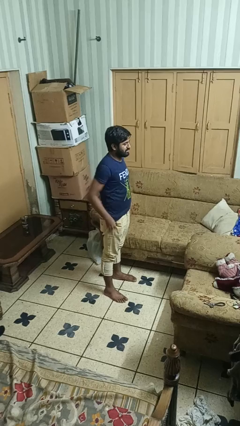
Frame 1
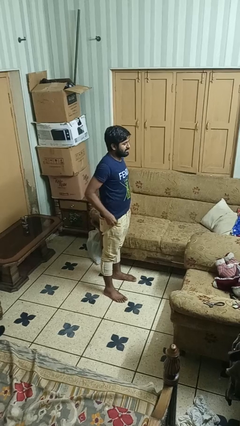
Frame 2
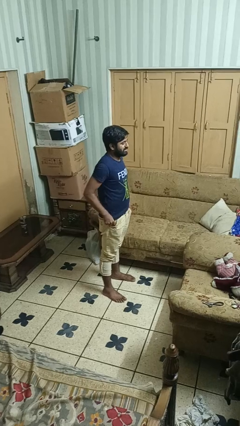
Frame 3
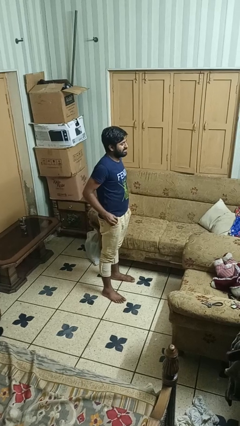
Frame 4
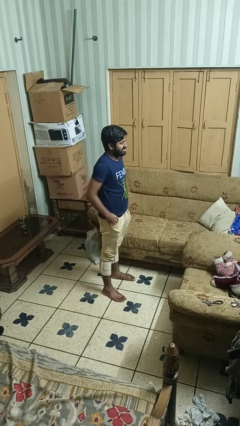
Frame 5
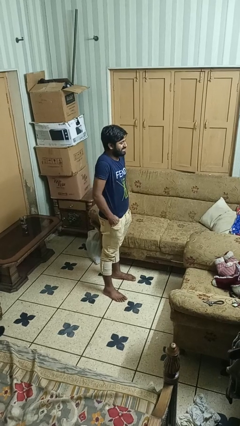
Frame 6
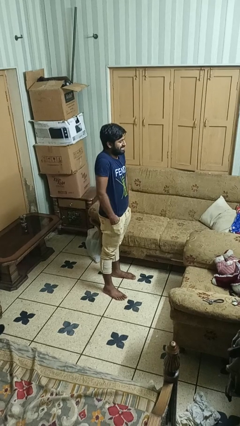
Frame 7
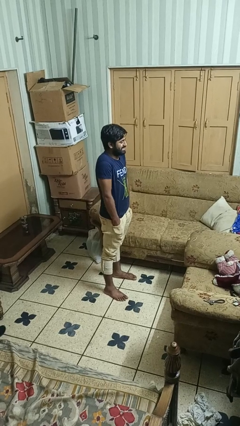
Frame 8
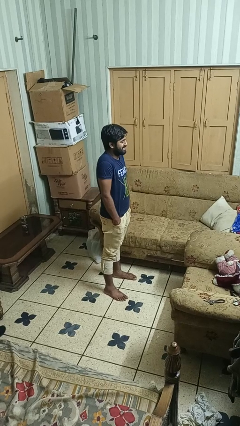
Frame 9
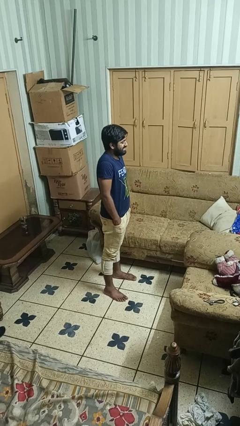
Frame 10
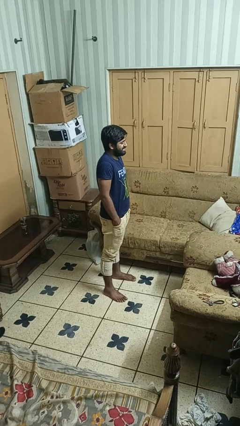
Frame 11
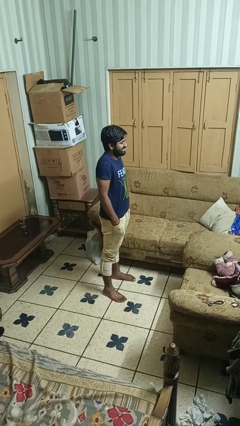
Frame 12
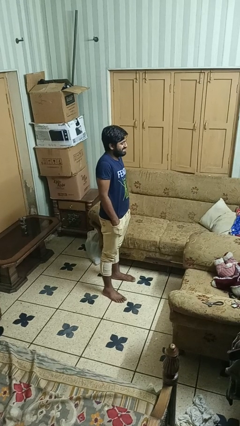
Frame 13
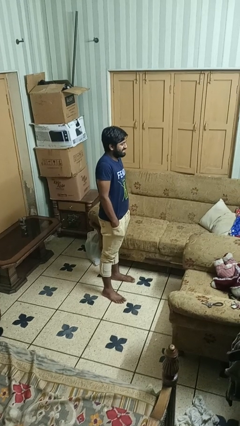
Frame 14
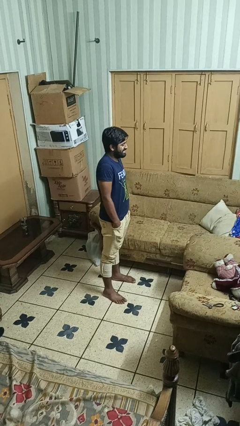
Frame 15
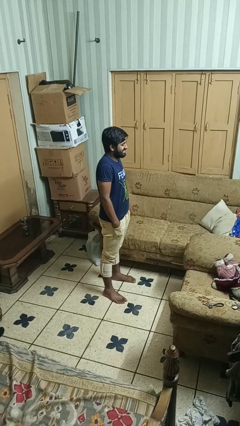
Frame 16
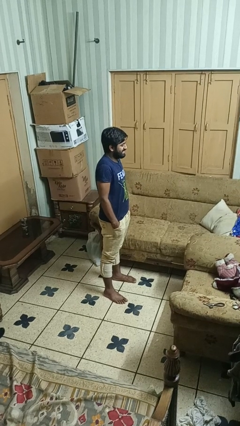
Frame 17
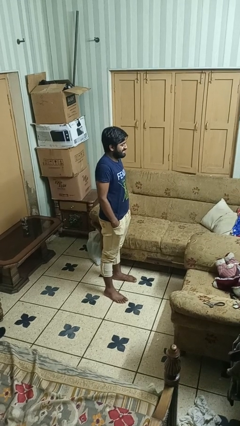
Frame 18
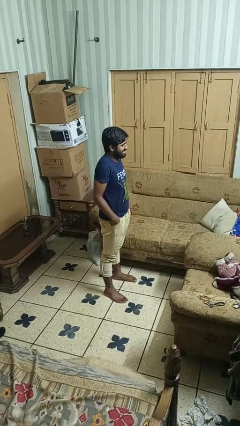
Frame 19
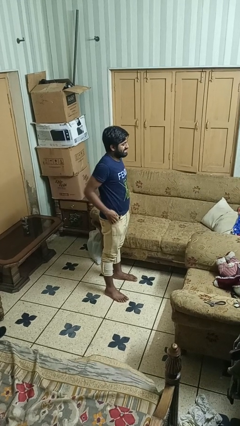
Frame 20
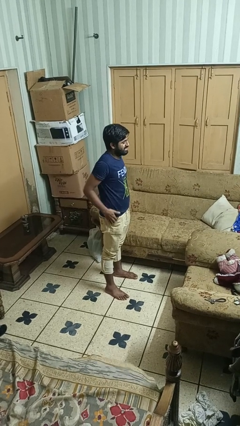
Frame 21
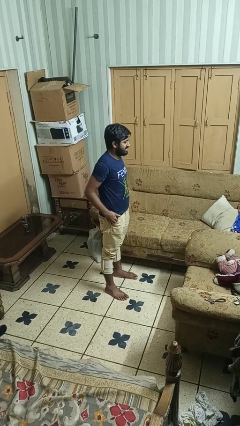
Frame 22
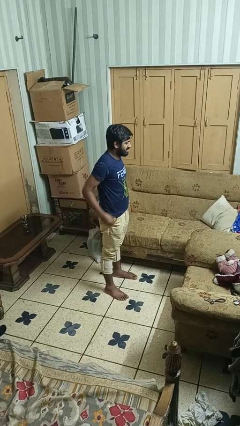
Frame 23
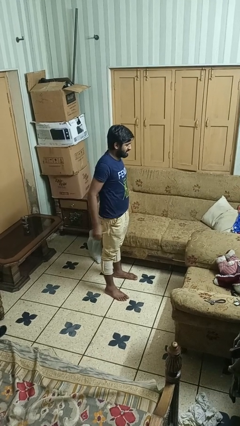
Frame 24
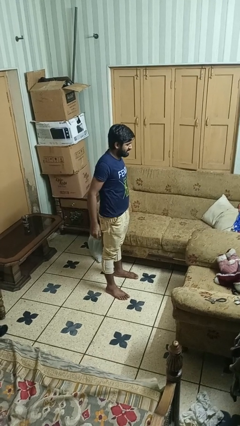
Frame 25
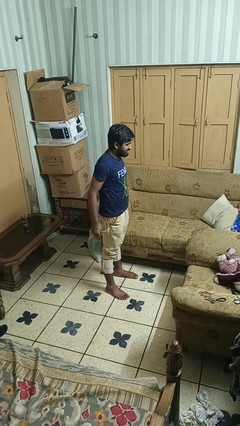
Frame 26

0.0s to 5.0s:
person puts hands in back pockets

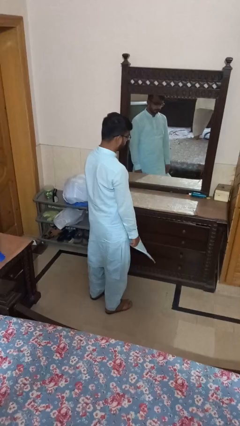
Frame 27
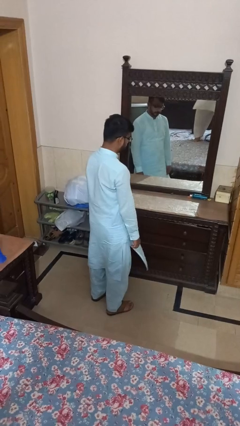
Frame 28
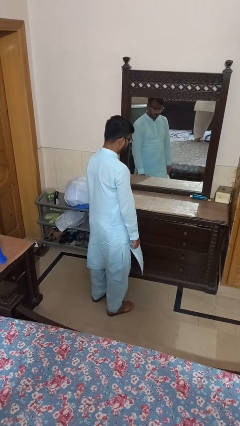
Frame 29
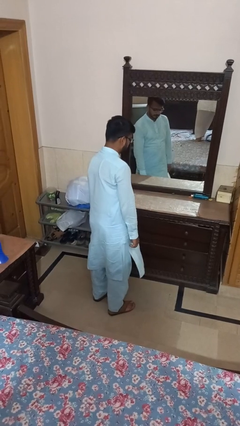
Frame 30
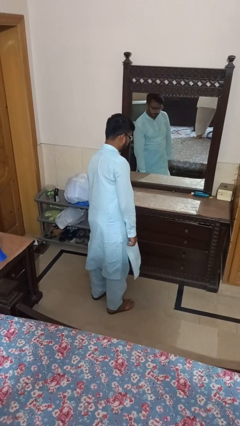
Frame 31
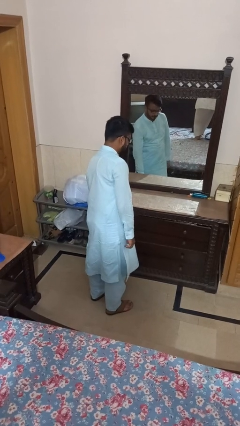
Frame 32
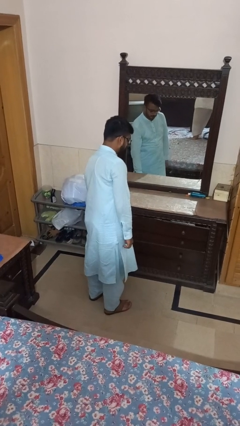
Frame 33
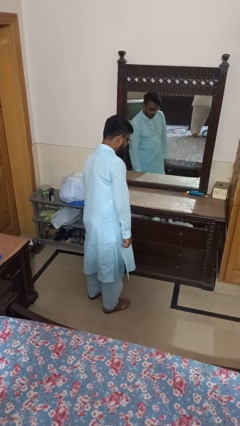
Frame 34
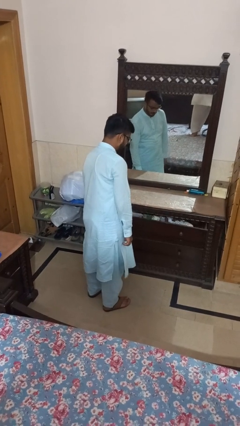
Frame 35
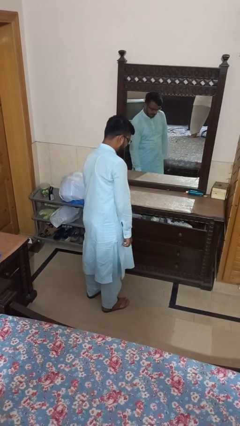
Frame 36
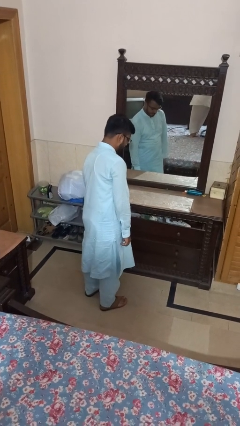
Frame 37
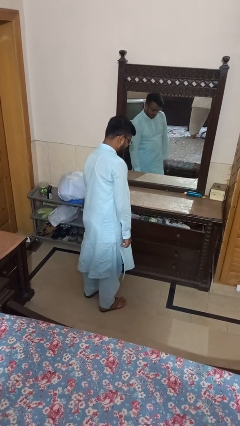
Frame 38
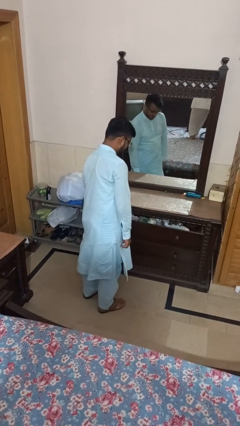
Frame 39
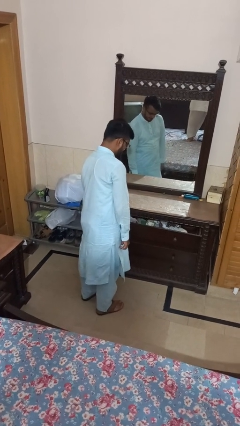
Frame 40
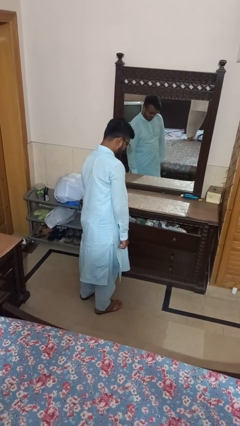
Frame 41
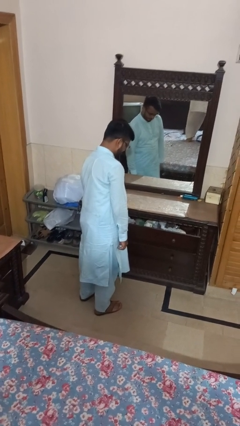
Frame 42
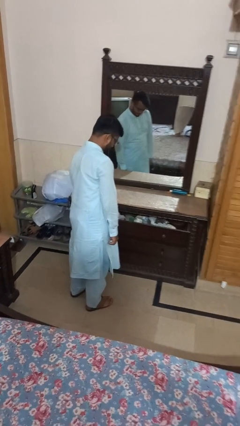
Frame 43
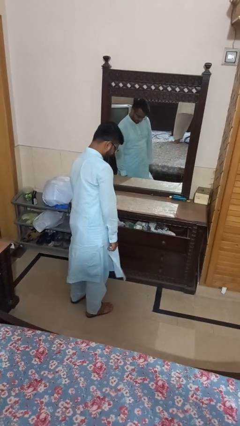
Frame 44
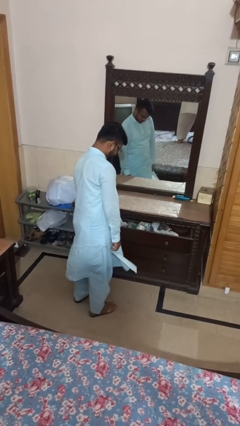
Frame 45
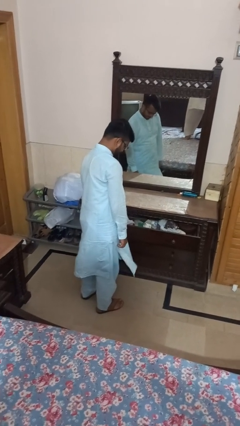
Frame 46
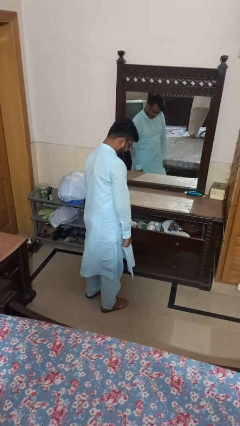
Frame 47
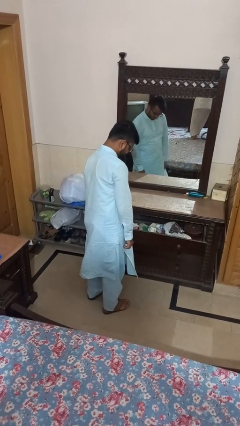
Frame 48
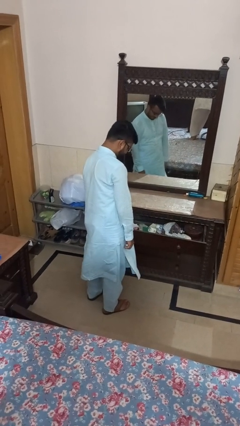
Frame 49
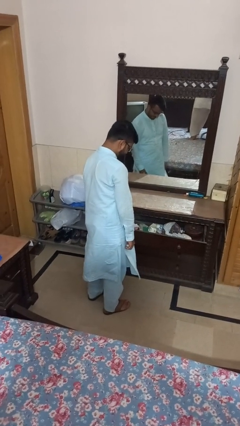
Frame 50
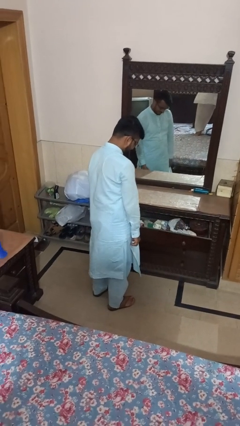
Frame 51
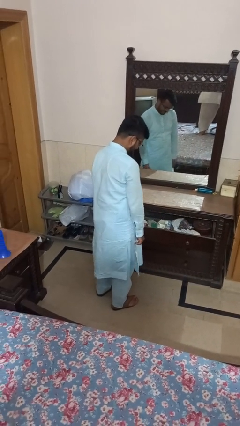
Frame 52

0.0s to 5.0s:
person opens dresser drawer

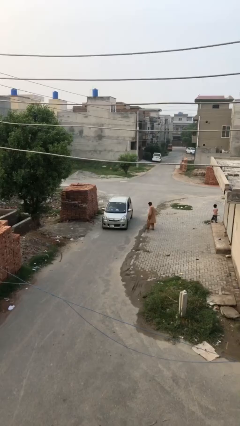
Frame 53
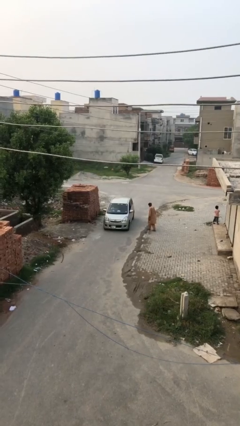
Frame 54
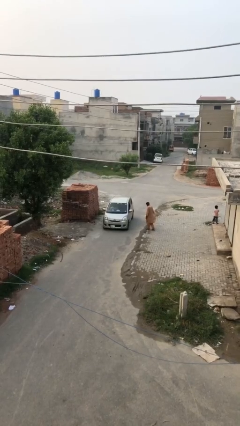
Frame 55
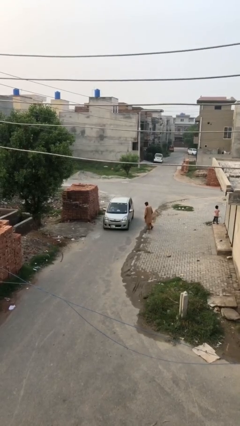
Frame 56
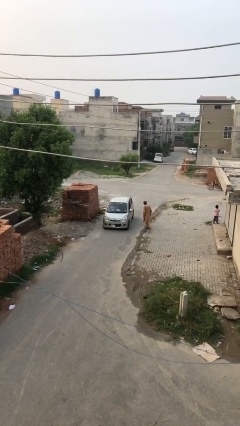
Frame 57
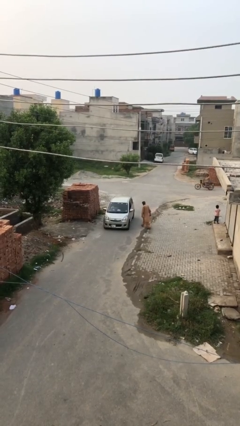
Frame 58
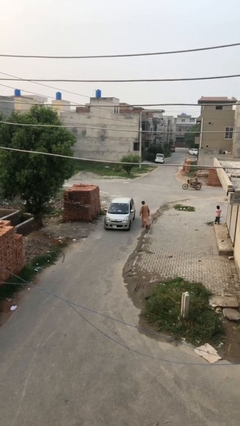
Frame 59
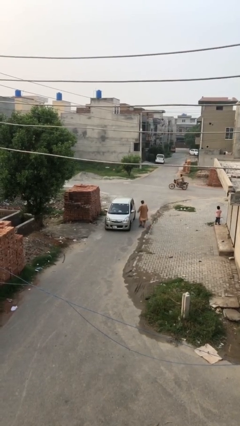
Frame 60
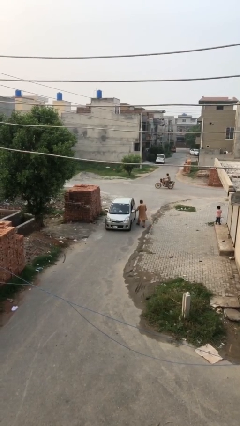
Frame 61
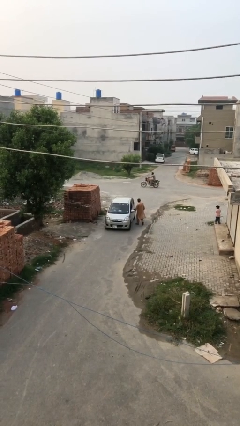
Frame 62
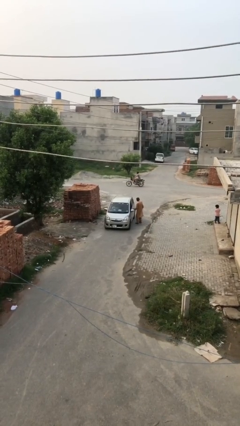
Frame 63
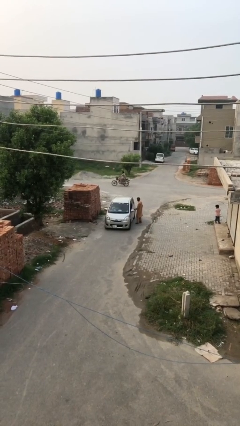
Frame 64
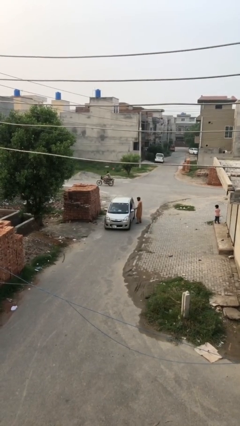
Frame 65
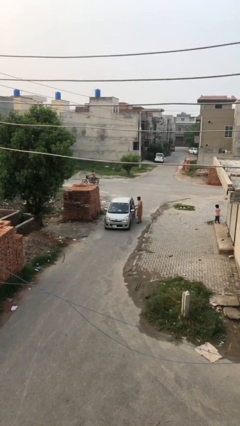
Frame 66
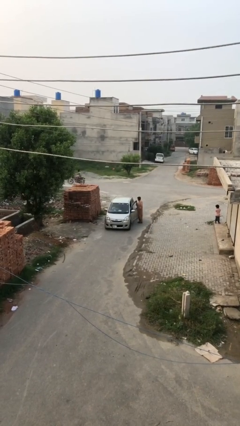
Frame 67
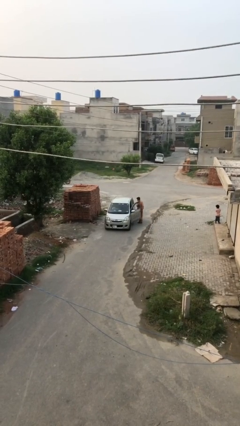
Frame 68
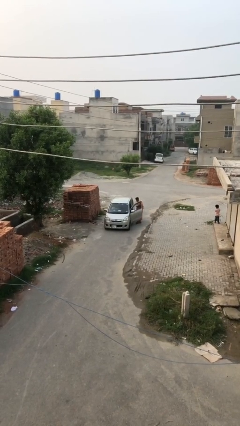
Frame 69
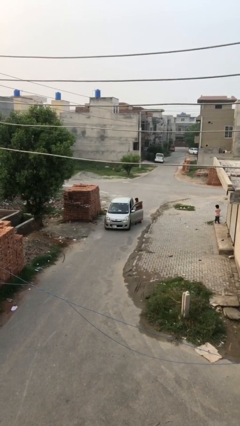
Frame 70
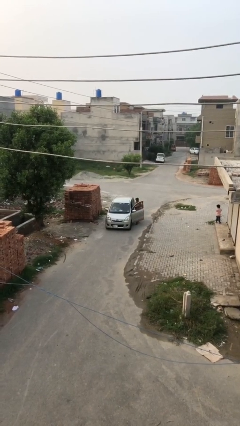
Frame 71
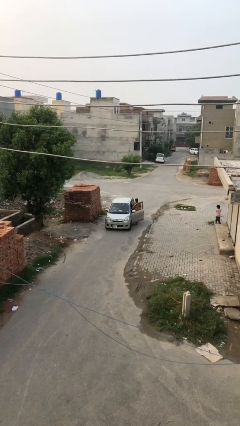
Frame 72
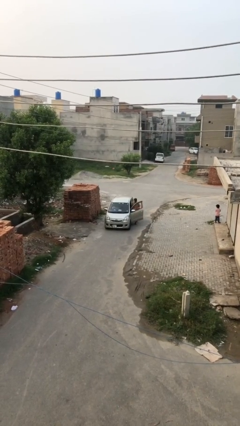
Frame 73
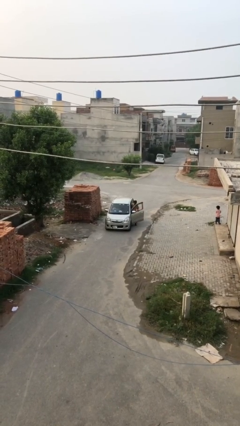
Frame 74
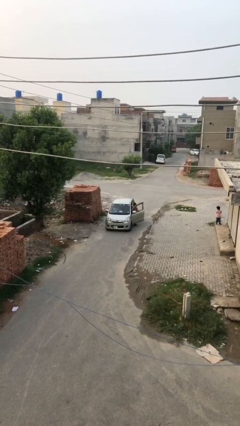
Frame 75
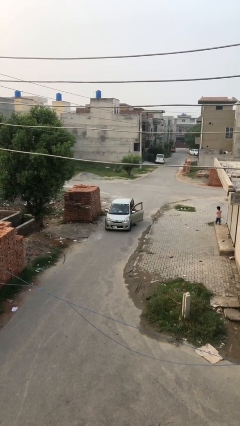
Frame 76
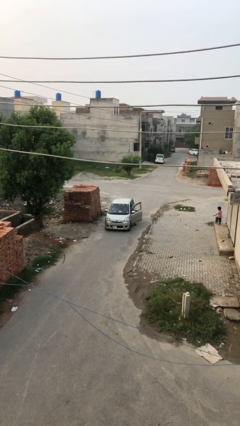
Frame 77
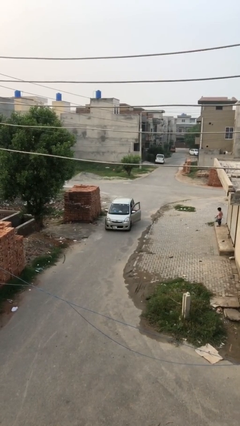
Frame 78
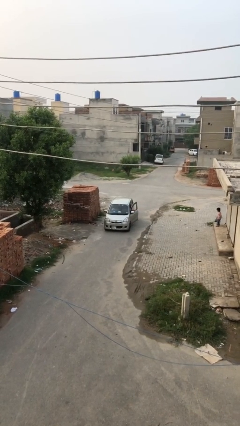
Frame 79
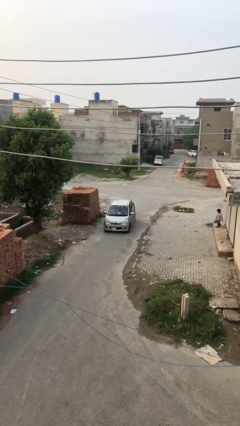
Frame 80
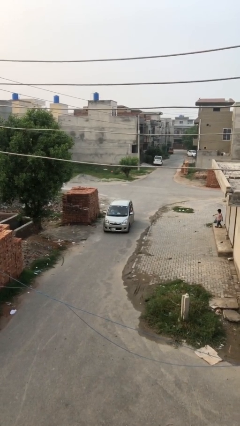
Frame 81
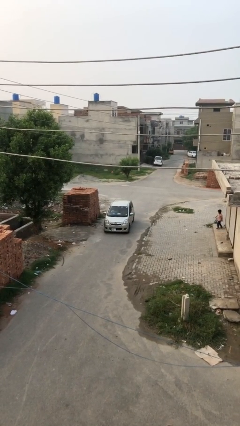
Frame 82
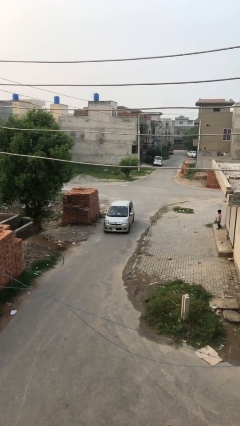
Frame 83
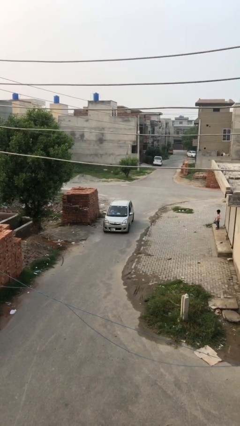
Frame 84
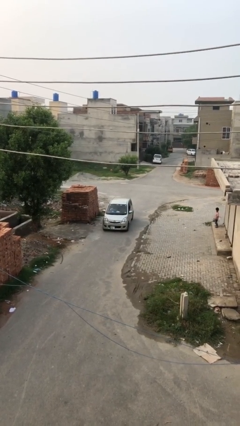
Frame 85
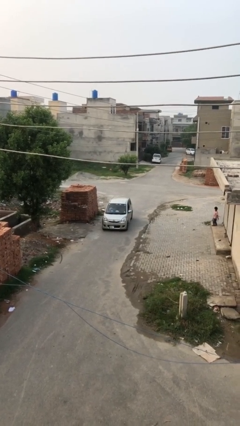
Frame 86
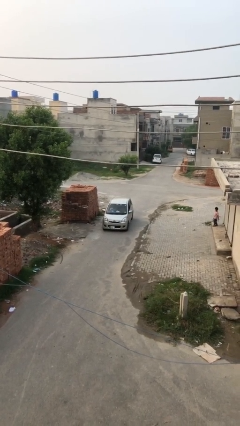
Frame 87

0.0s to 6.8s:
car picks up person

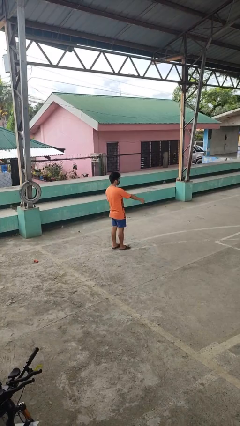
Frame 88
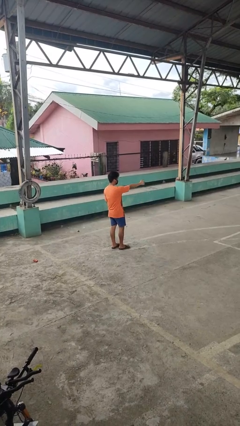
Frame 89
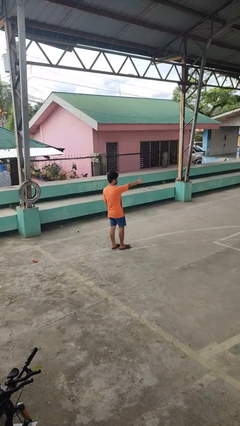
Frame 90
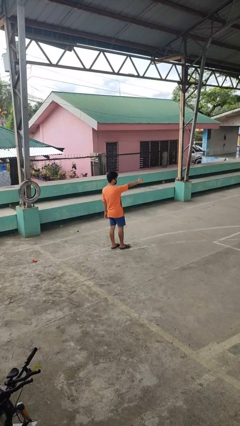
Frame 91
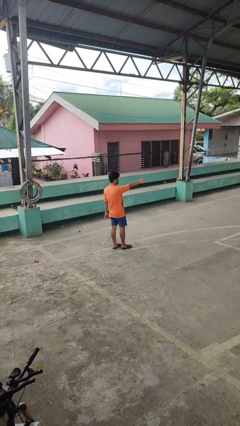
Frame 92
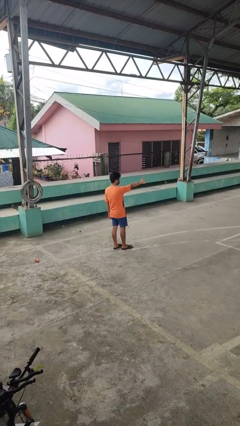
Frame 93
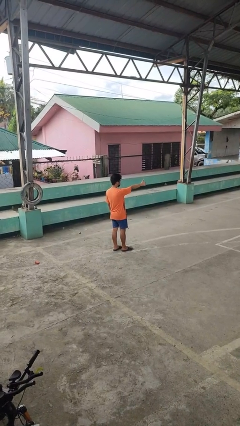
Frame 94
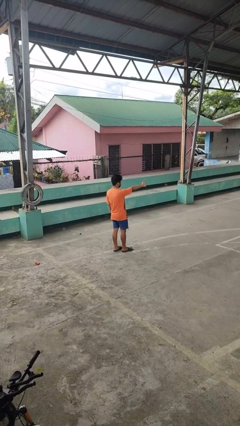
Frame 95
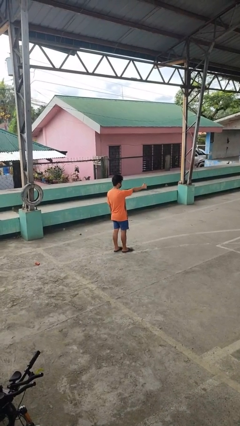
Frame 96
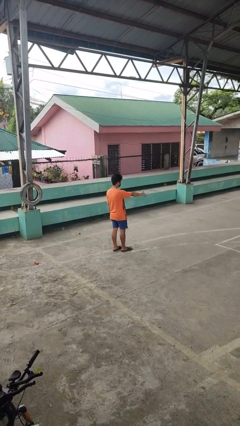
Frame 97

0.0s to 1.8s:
person gestures thumbs up
